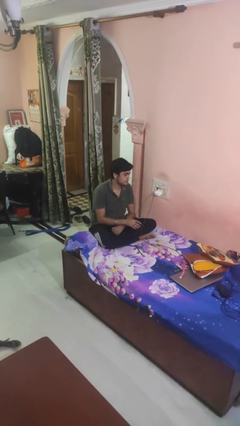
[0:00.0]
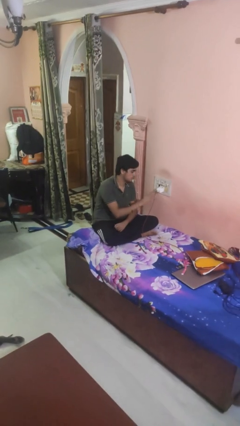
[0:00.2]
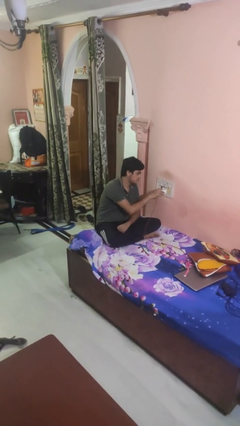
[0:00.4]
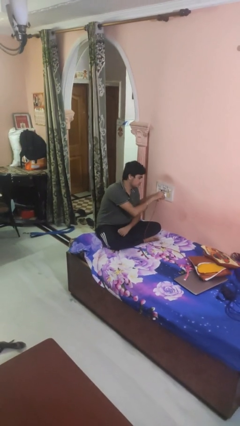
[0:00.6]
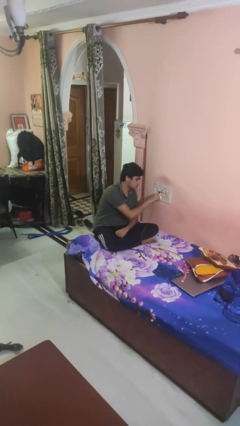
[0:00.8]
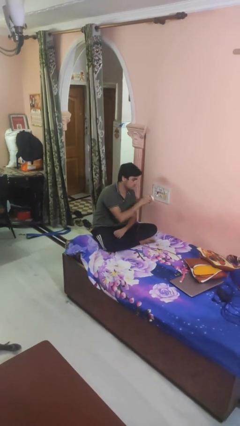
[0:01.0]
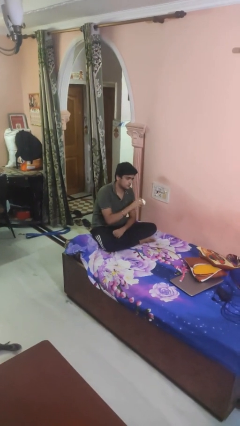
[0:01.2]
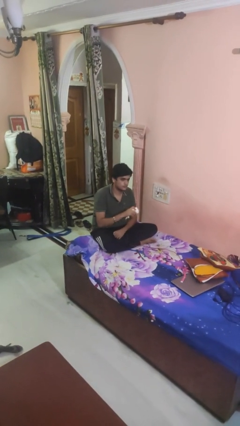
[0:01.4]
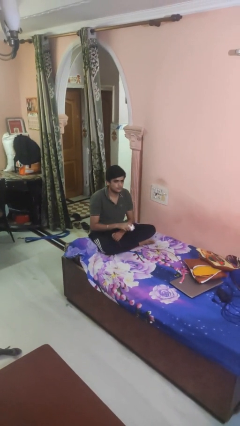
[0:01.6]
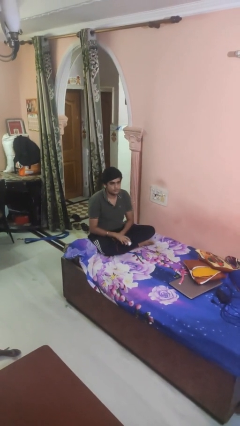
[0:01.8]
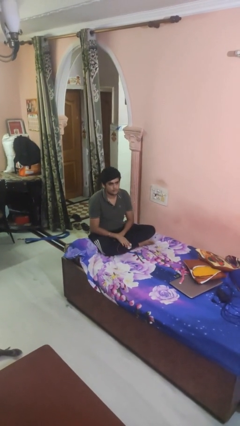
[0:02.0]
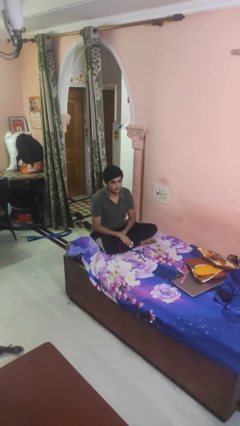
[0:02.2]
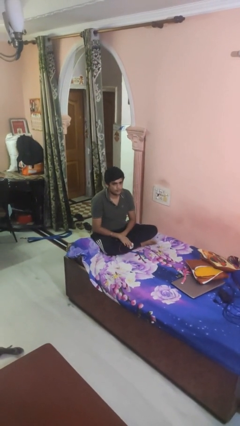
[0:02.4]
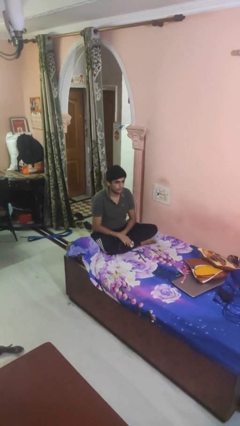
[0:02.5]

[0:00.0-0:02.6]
person unplugs from electrical socket

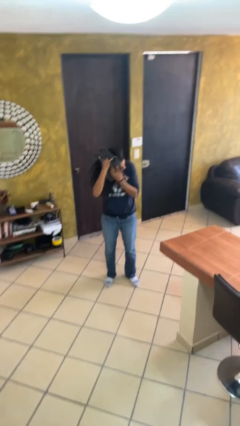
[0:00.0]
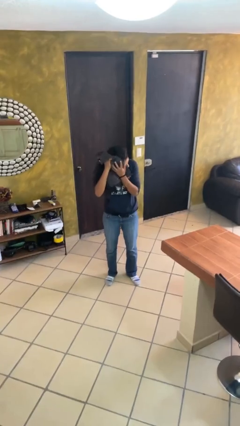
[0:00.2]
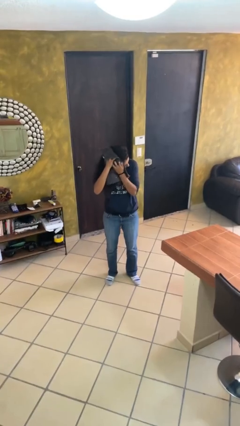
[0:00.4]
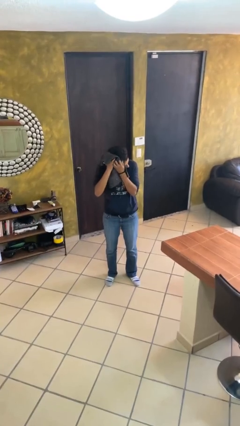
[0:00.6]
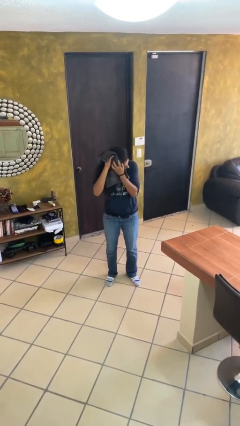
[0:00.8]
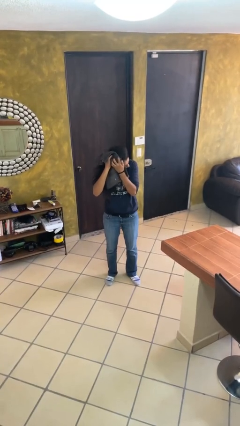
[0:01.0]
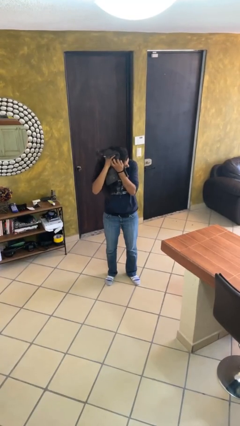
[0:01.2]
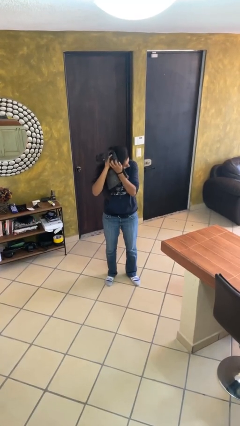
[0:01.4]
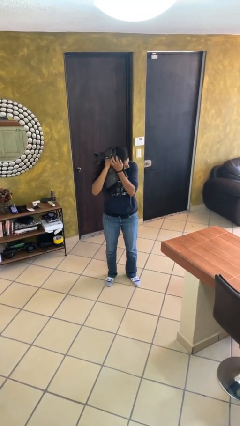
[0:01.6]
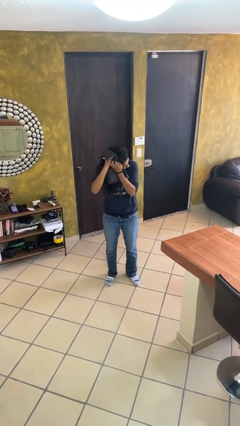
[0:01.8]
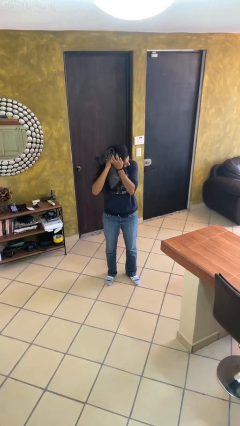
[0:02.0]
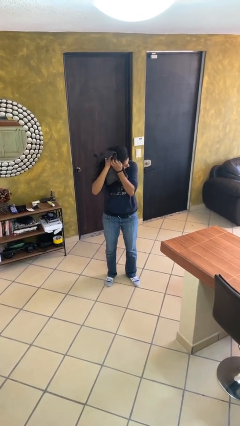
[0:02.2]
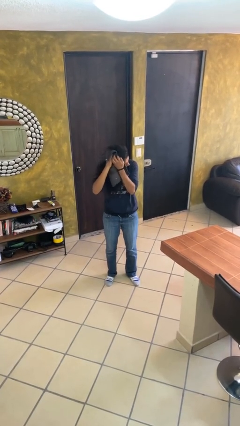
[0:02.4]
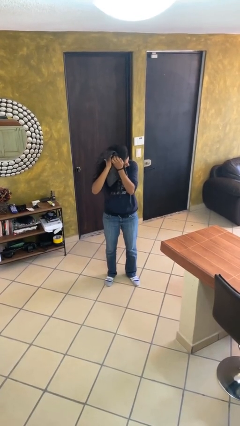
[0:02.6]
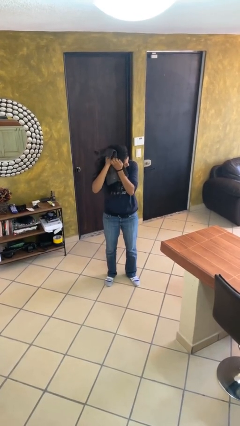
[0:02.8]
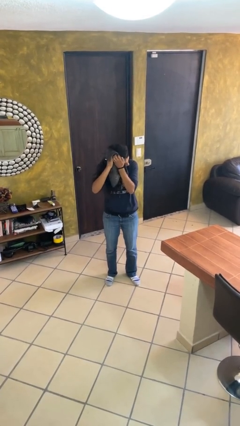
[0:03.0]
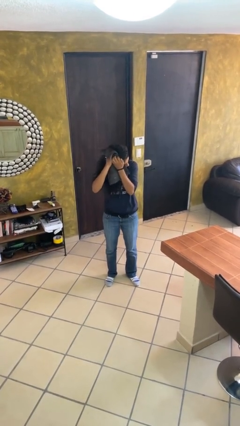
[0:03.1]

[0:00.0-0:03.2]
person dries hair with towel

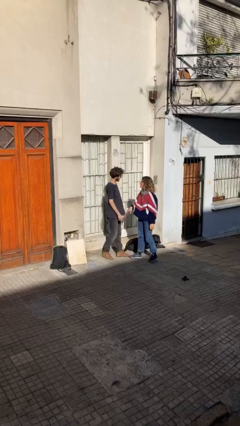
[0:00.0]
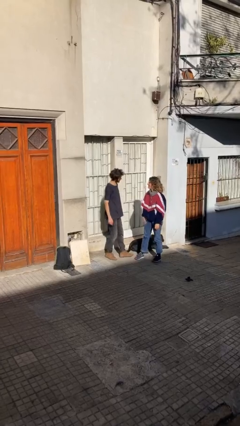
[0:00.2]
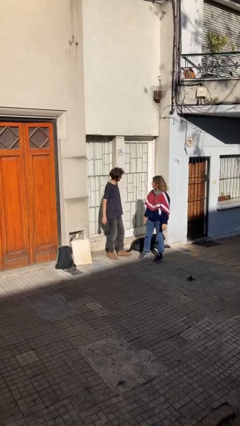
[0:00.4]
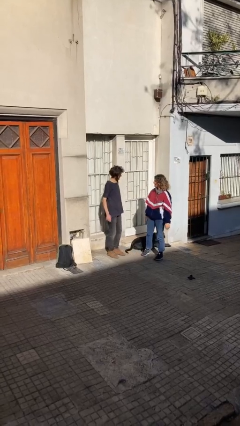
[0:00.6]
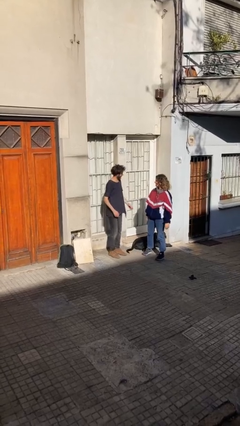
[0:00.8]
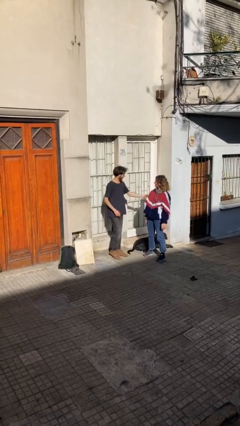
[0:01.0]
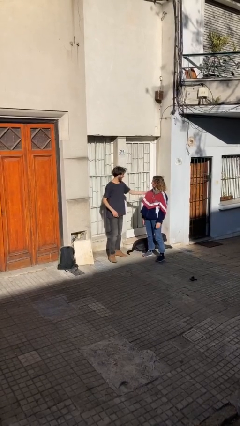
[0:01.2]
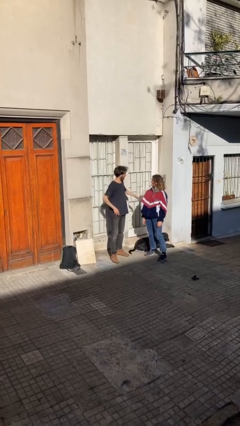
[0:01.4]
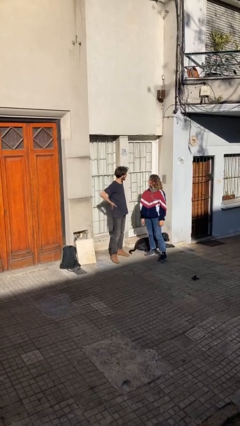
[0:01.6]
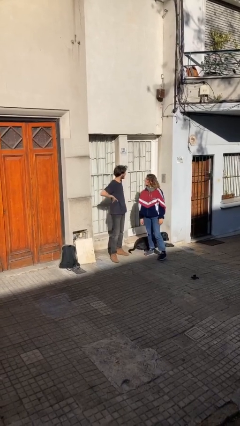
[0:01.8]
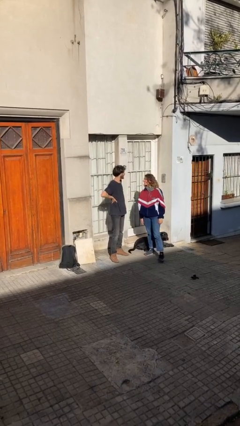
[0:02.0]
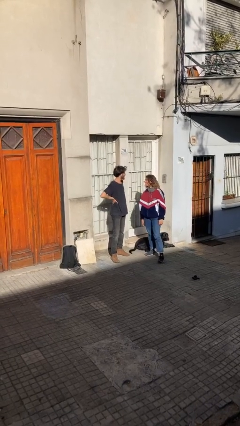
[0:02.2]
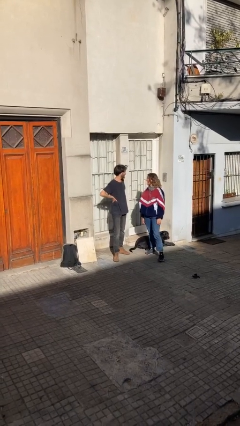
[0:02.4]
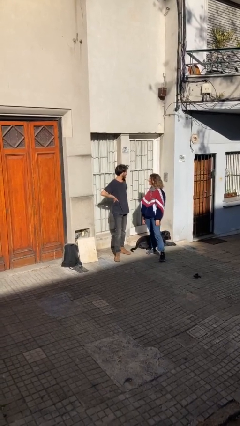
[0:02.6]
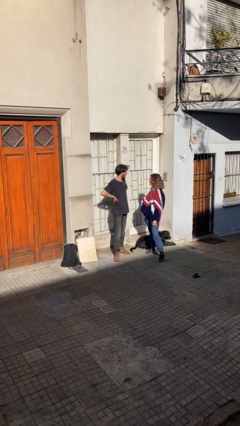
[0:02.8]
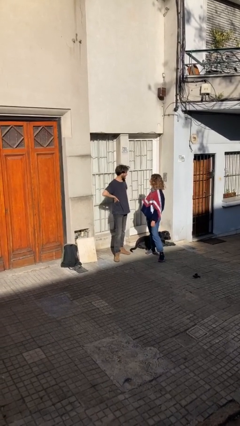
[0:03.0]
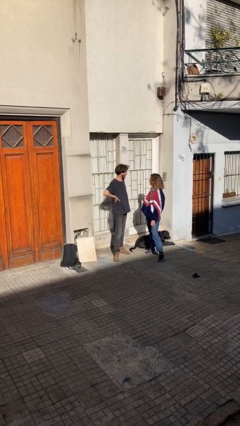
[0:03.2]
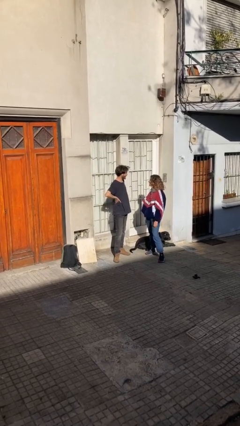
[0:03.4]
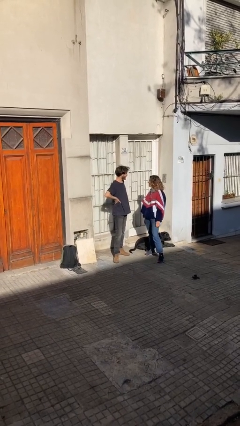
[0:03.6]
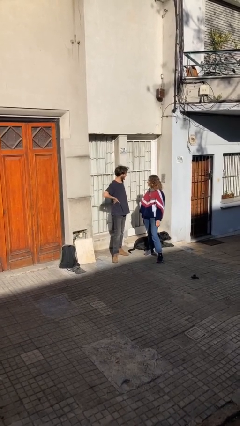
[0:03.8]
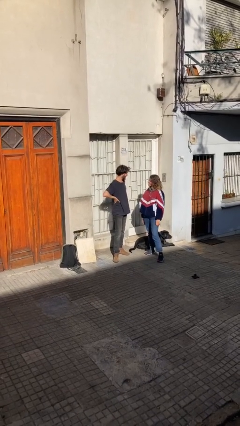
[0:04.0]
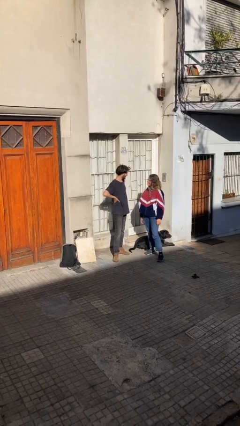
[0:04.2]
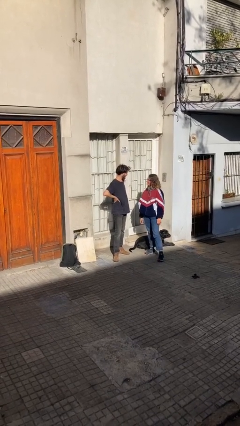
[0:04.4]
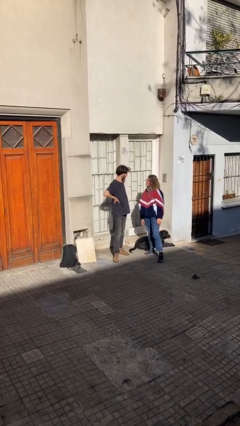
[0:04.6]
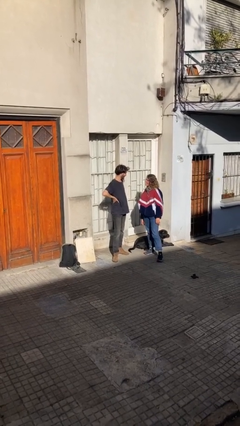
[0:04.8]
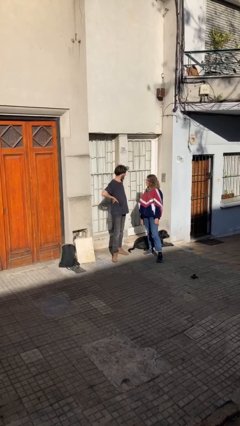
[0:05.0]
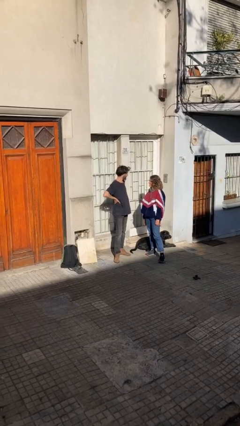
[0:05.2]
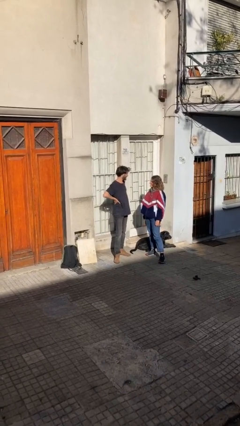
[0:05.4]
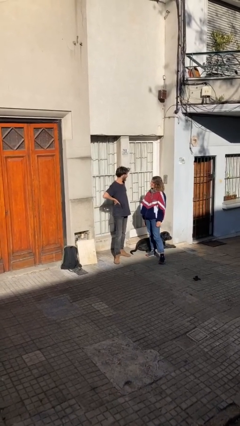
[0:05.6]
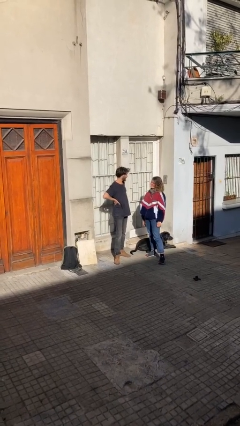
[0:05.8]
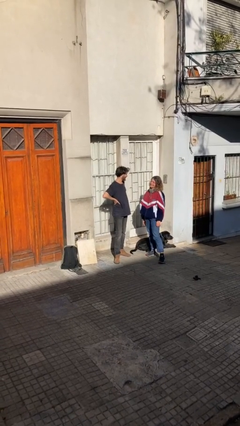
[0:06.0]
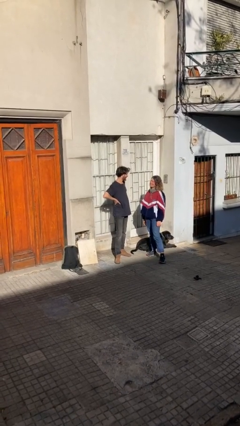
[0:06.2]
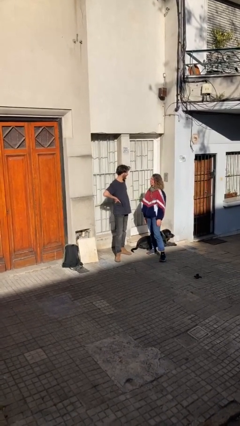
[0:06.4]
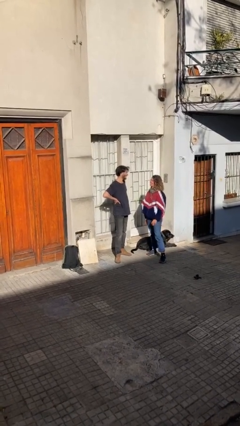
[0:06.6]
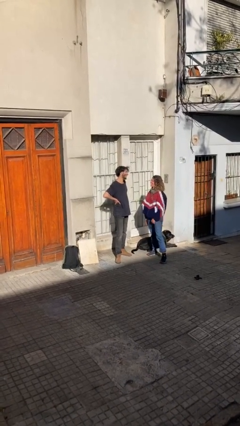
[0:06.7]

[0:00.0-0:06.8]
person talks to person

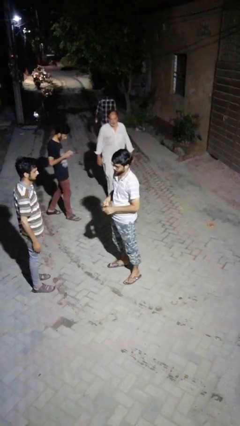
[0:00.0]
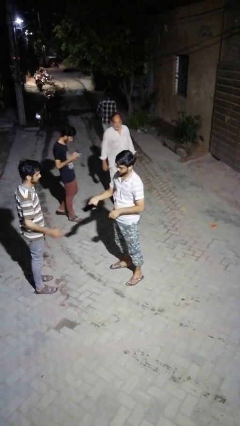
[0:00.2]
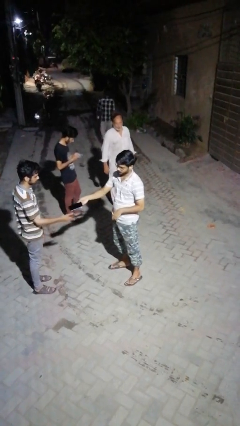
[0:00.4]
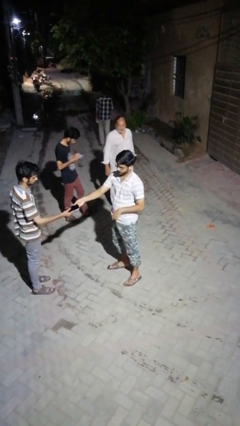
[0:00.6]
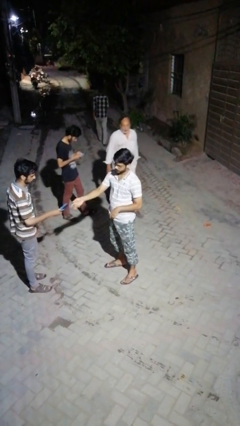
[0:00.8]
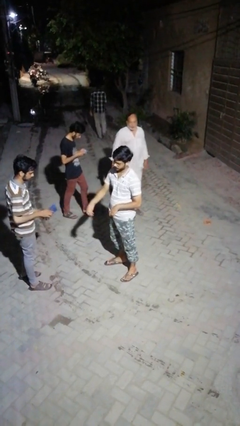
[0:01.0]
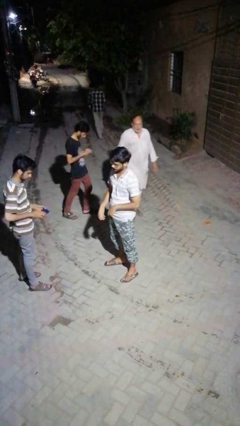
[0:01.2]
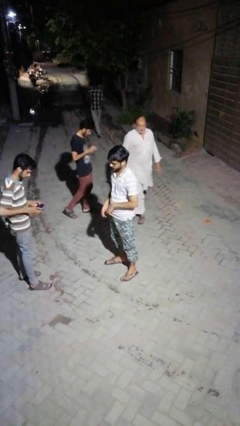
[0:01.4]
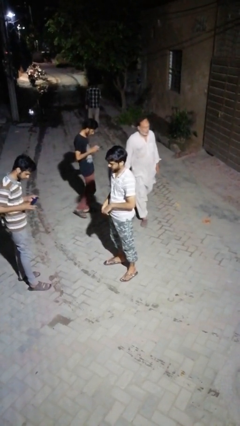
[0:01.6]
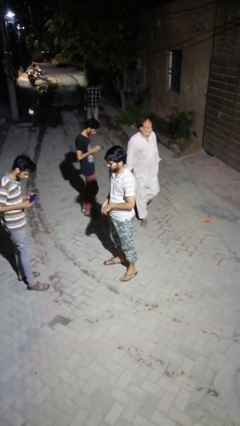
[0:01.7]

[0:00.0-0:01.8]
person transfers object to person

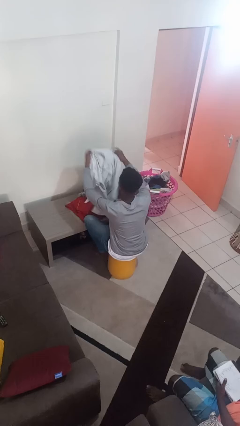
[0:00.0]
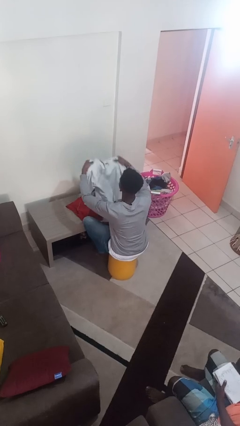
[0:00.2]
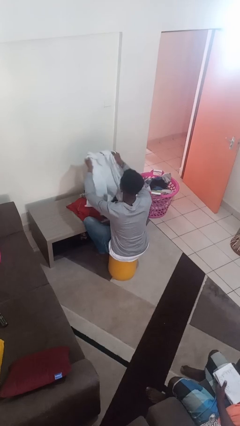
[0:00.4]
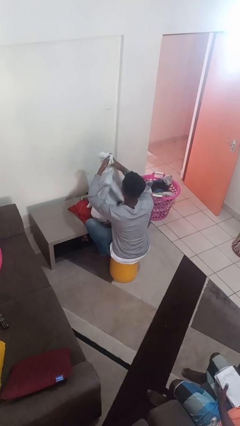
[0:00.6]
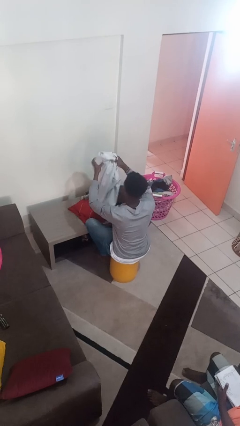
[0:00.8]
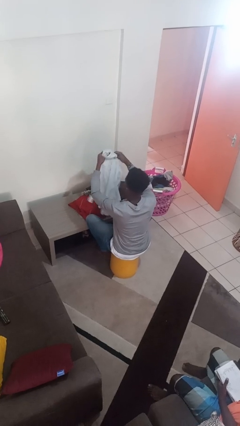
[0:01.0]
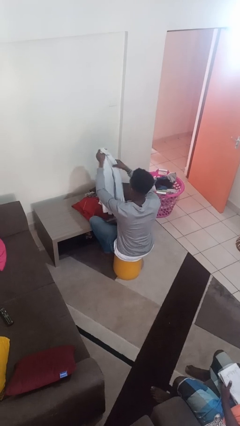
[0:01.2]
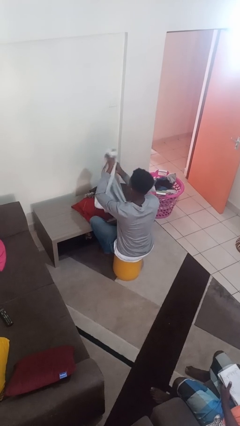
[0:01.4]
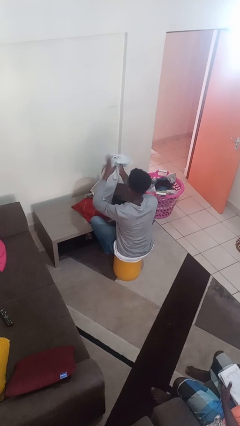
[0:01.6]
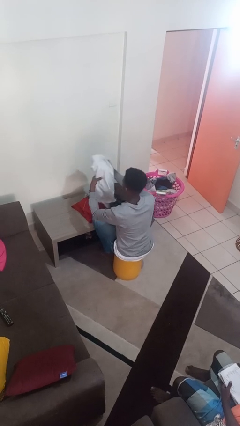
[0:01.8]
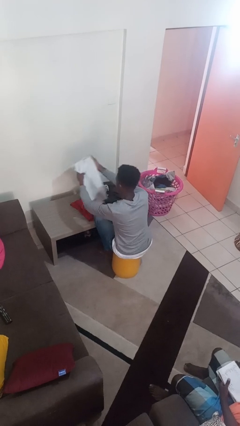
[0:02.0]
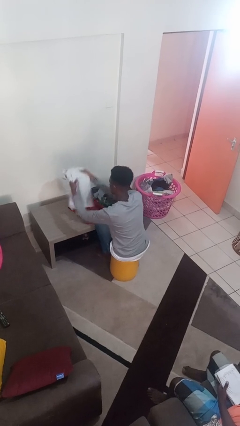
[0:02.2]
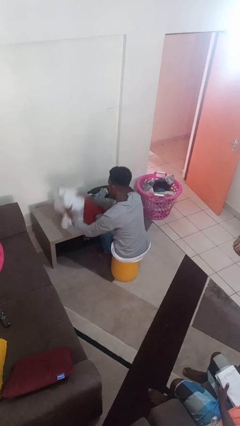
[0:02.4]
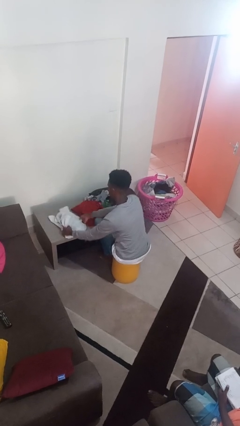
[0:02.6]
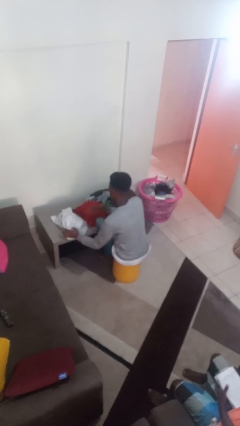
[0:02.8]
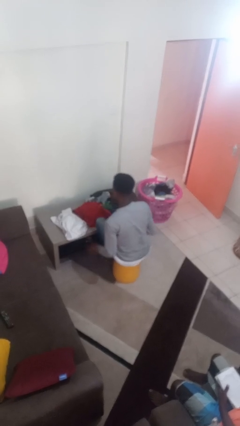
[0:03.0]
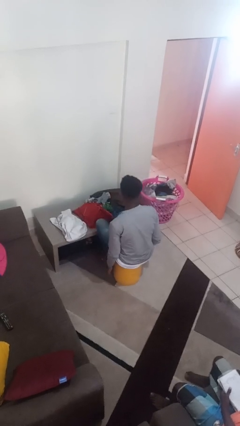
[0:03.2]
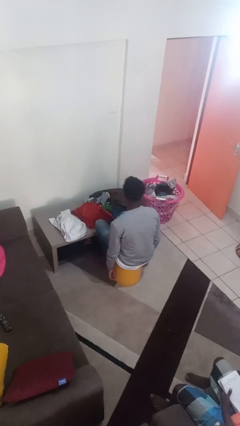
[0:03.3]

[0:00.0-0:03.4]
person folds shirt
